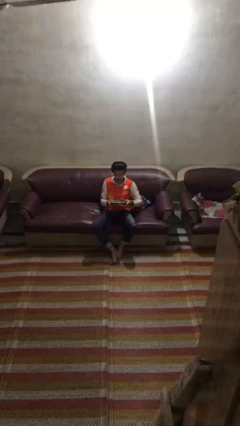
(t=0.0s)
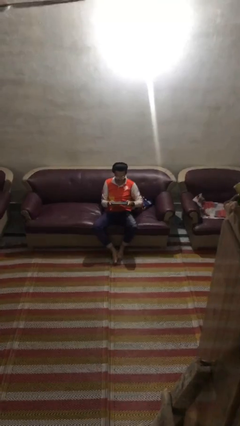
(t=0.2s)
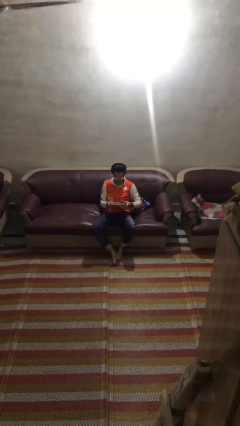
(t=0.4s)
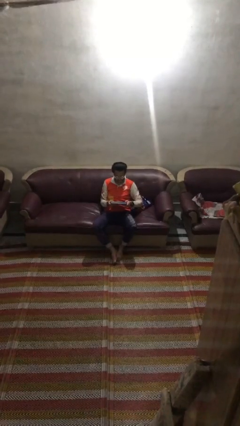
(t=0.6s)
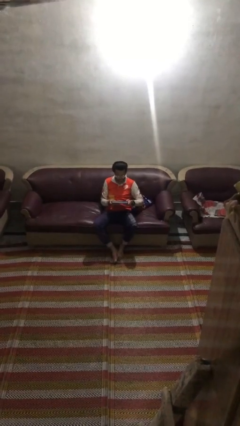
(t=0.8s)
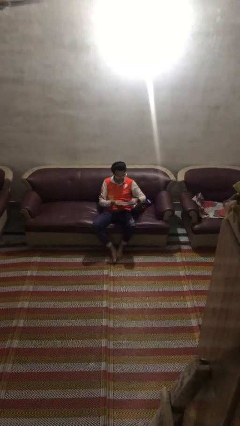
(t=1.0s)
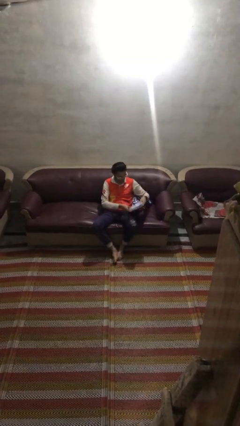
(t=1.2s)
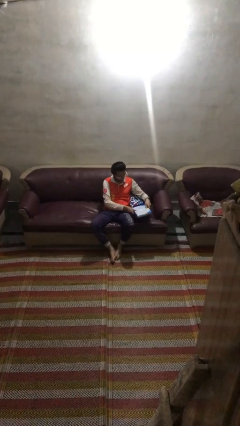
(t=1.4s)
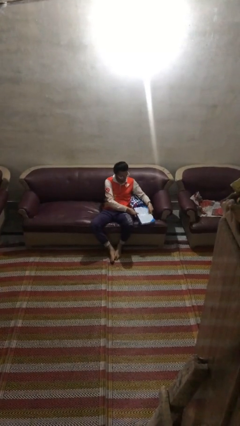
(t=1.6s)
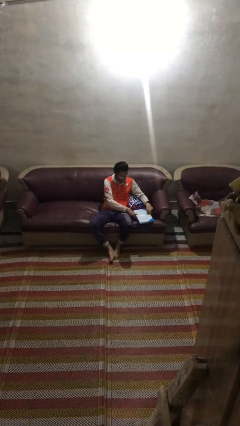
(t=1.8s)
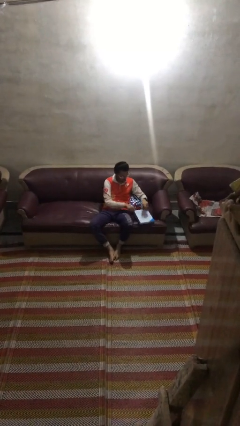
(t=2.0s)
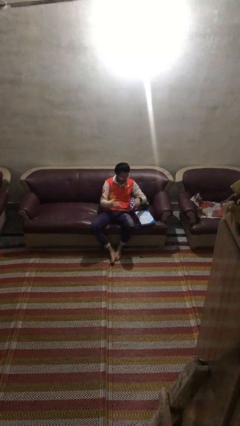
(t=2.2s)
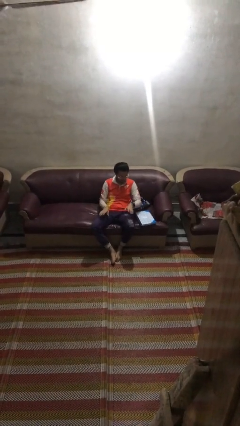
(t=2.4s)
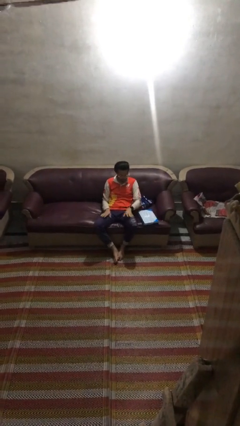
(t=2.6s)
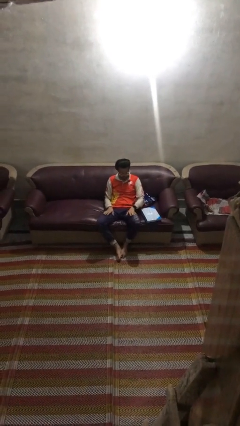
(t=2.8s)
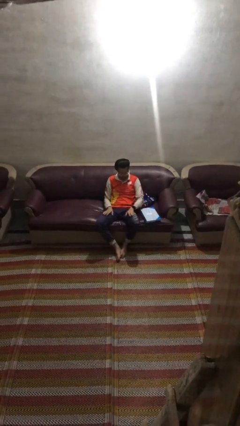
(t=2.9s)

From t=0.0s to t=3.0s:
person puts down object on couch

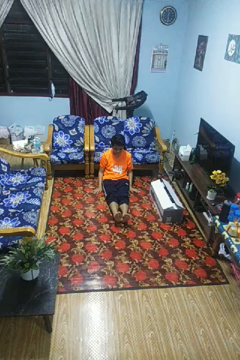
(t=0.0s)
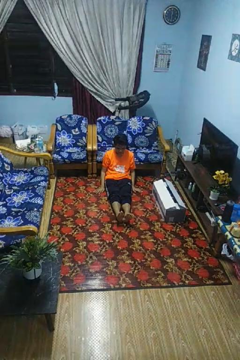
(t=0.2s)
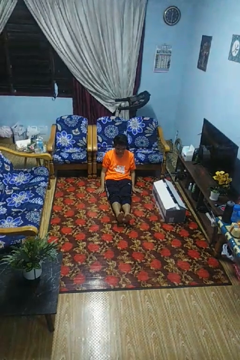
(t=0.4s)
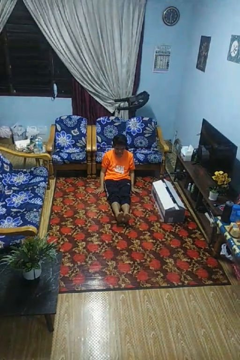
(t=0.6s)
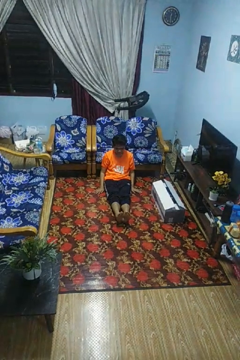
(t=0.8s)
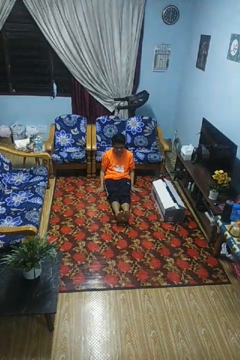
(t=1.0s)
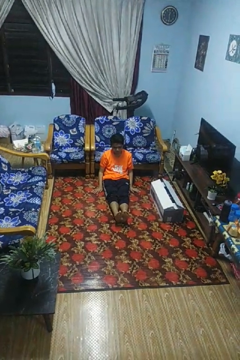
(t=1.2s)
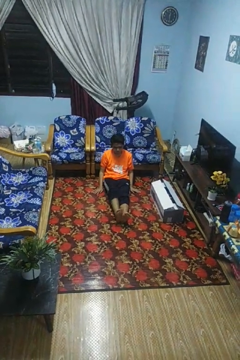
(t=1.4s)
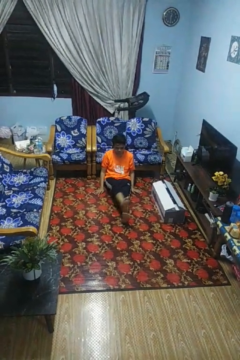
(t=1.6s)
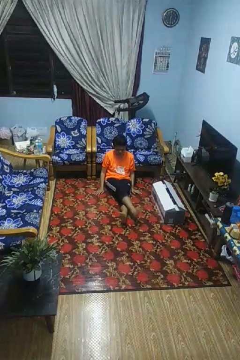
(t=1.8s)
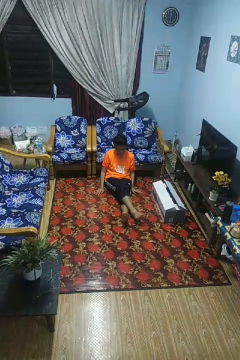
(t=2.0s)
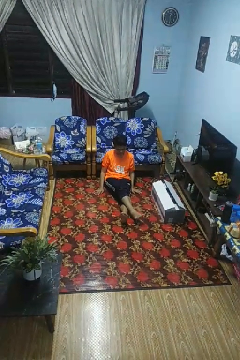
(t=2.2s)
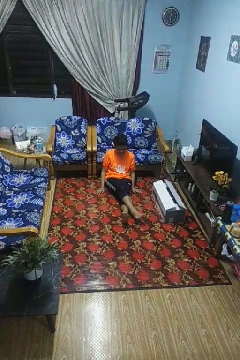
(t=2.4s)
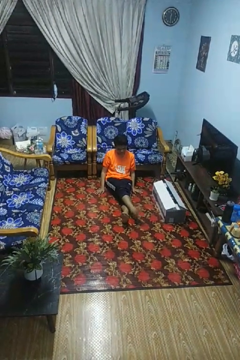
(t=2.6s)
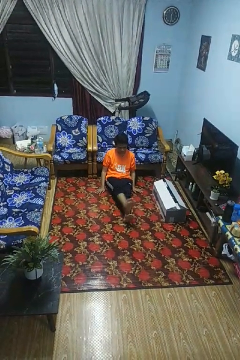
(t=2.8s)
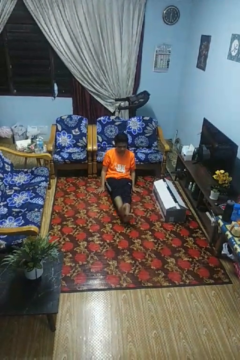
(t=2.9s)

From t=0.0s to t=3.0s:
person crosses legs

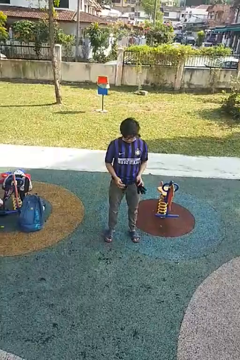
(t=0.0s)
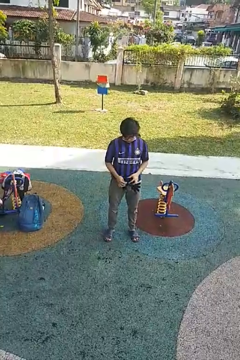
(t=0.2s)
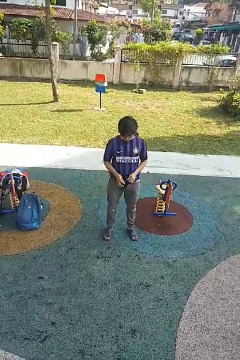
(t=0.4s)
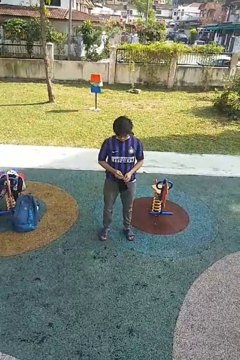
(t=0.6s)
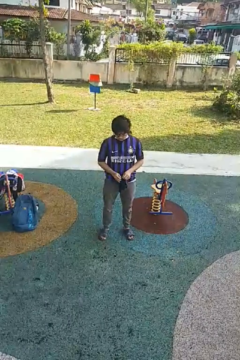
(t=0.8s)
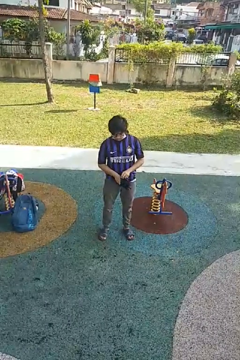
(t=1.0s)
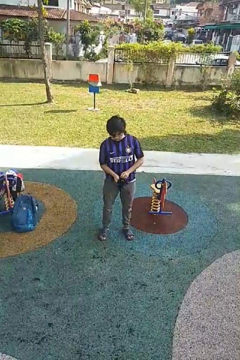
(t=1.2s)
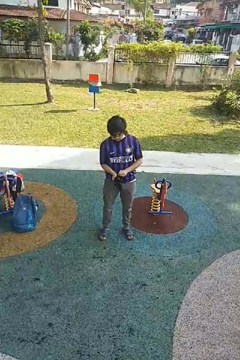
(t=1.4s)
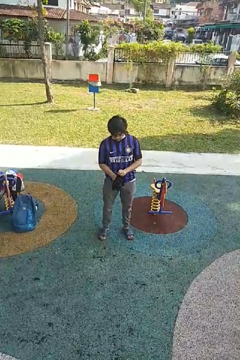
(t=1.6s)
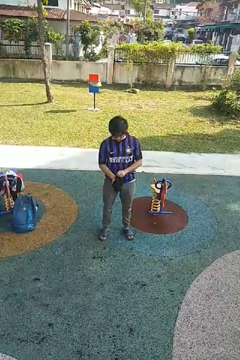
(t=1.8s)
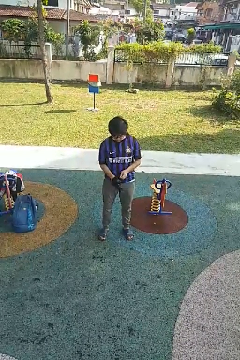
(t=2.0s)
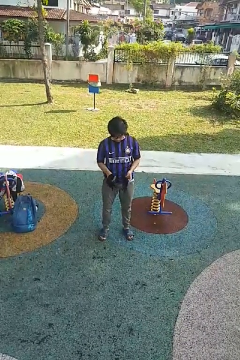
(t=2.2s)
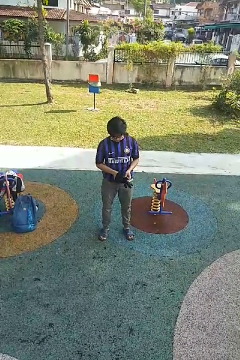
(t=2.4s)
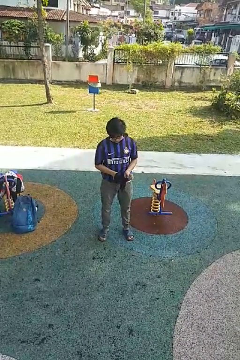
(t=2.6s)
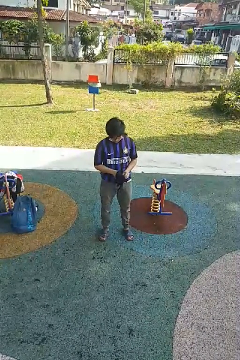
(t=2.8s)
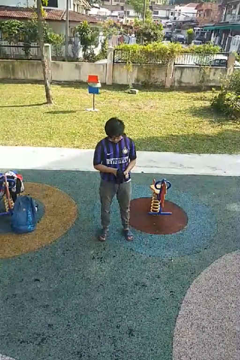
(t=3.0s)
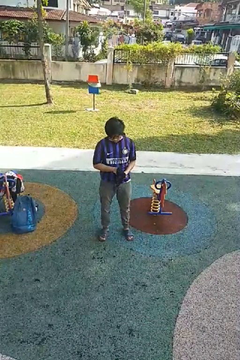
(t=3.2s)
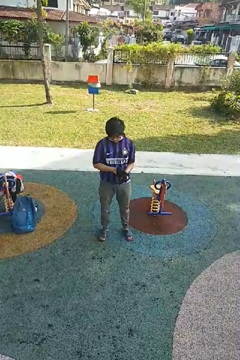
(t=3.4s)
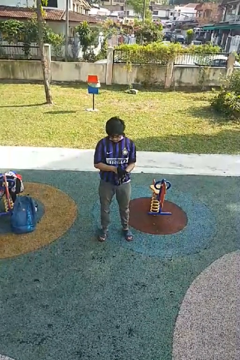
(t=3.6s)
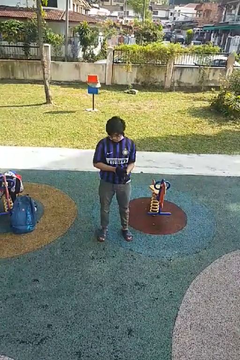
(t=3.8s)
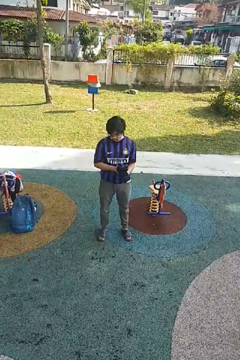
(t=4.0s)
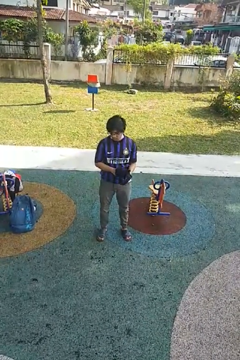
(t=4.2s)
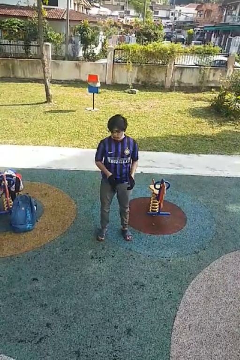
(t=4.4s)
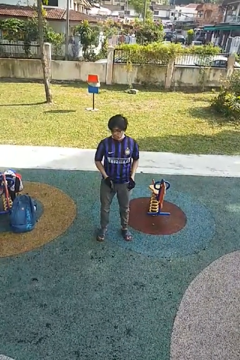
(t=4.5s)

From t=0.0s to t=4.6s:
person puts on gloves

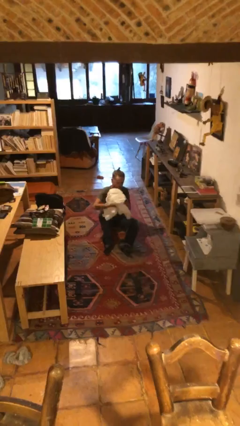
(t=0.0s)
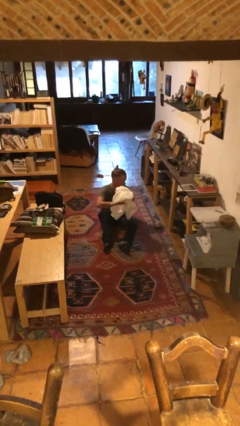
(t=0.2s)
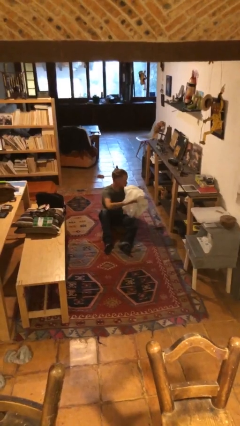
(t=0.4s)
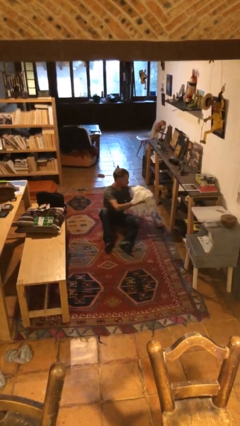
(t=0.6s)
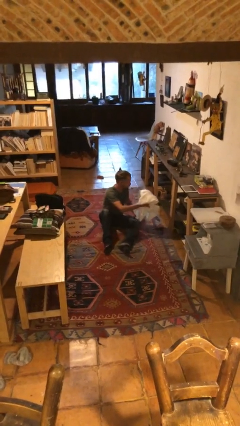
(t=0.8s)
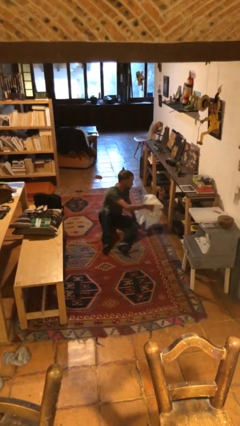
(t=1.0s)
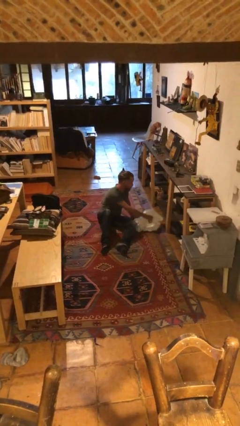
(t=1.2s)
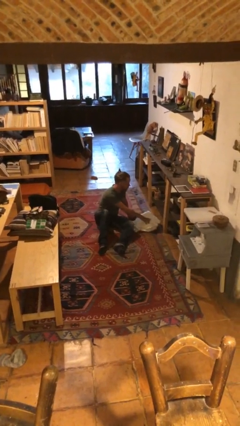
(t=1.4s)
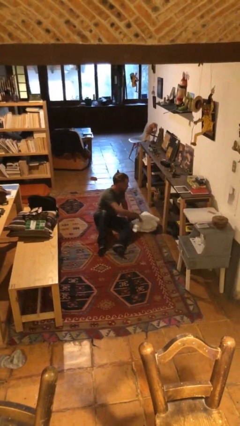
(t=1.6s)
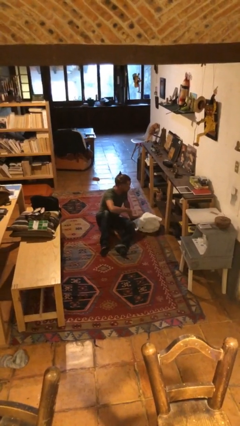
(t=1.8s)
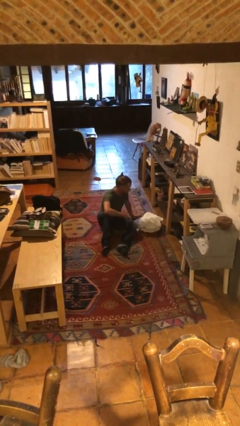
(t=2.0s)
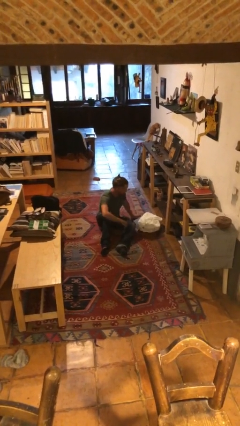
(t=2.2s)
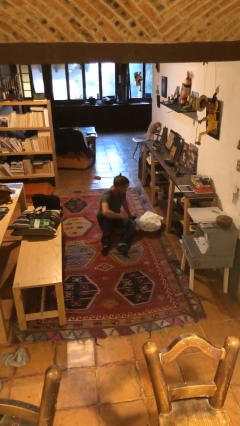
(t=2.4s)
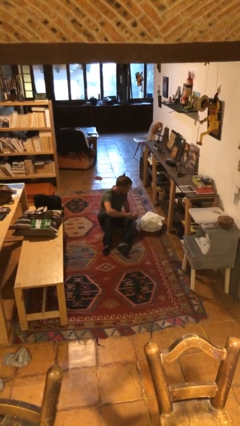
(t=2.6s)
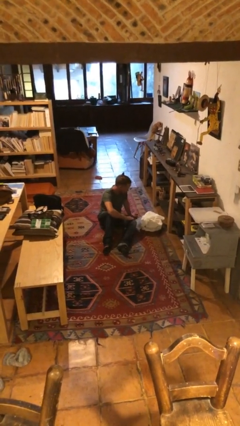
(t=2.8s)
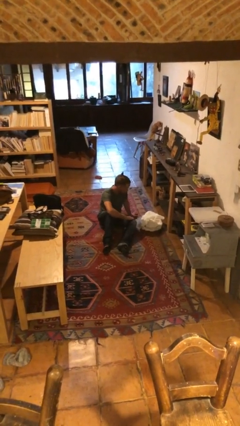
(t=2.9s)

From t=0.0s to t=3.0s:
person puts down object on floor

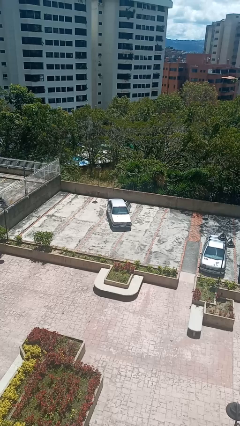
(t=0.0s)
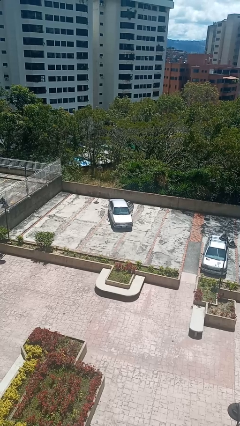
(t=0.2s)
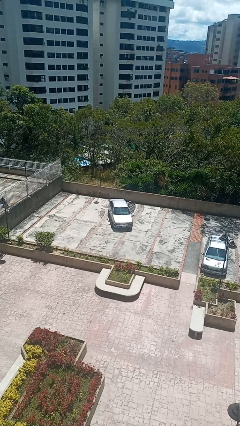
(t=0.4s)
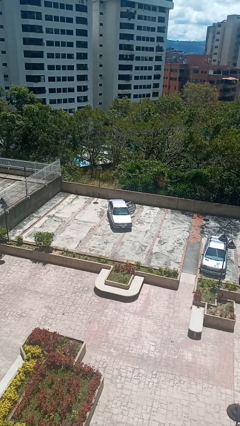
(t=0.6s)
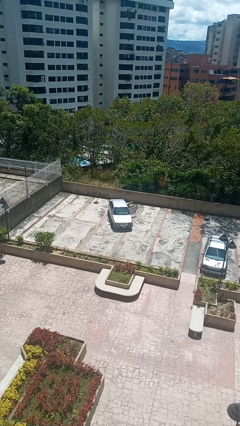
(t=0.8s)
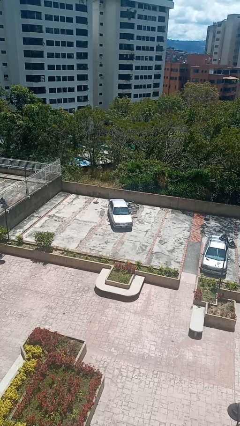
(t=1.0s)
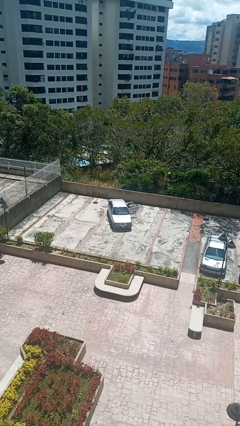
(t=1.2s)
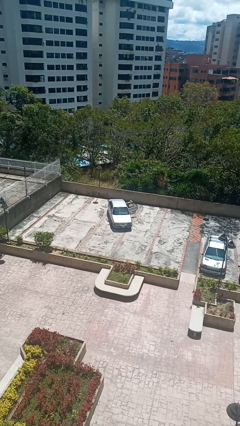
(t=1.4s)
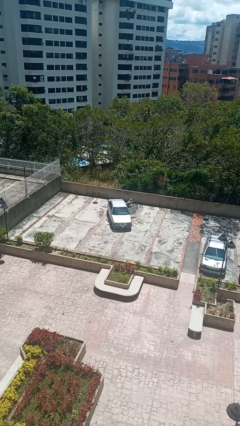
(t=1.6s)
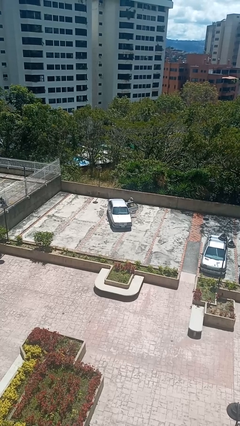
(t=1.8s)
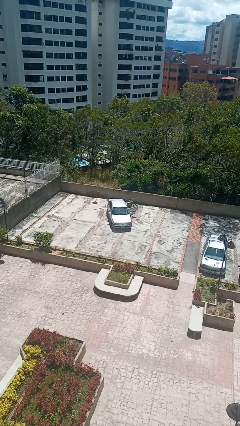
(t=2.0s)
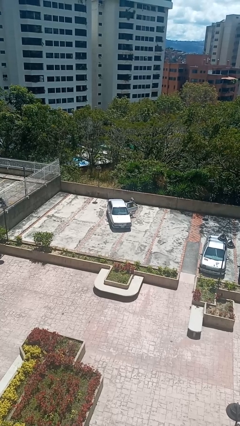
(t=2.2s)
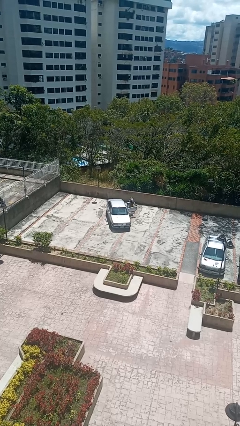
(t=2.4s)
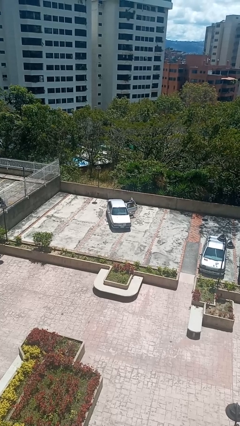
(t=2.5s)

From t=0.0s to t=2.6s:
car drops off person

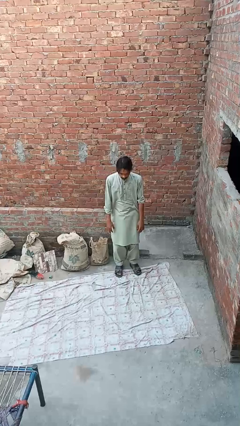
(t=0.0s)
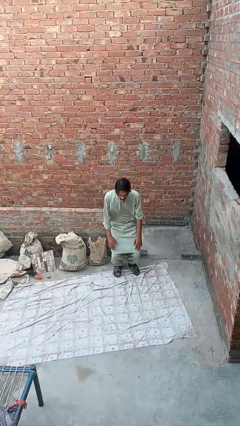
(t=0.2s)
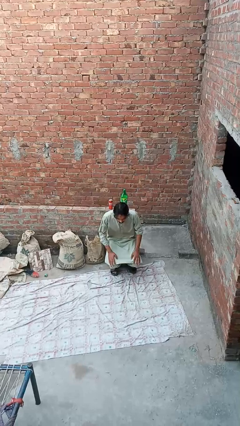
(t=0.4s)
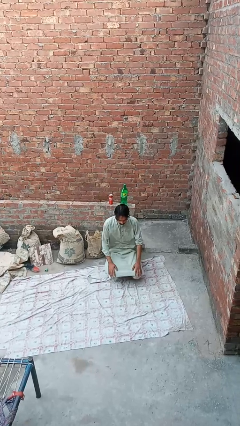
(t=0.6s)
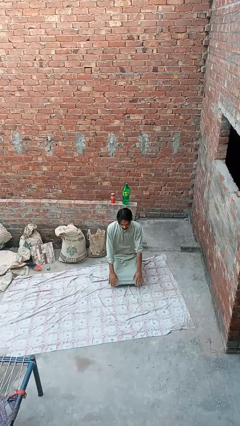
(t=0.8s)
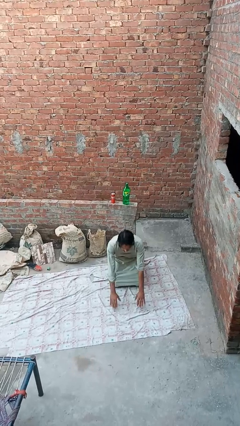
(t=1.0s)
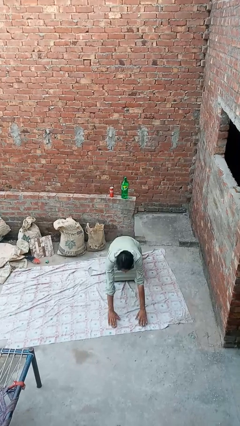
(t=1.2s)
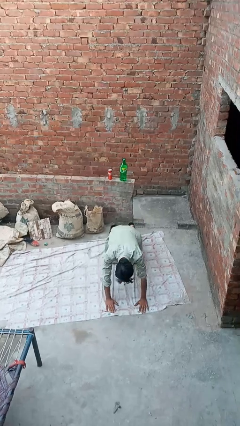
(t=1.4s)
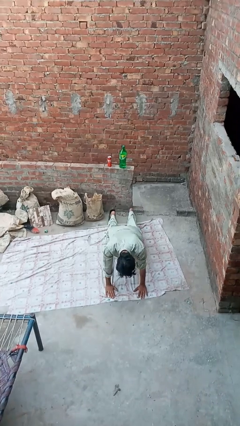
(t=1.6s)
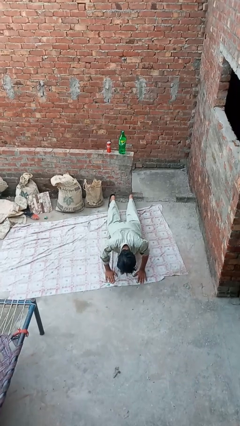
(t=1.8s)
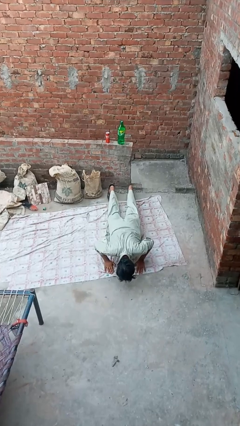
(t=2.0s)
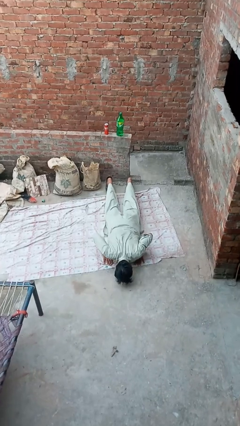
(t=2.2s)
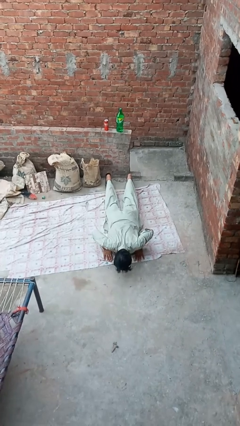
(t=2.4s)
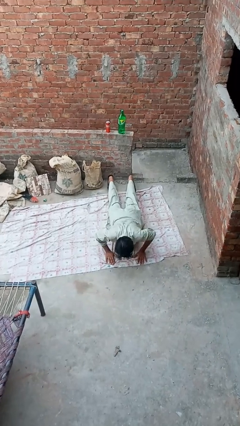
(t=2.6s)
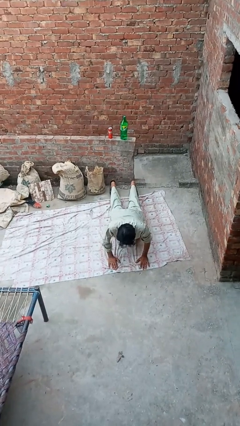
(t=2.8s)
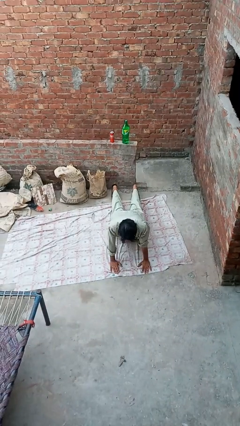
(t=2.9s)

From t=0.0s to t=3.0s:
person exercises with pushup
